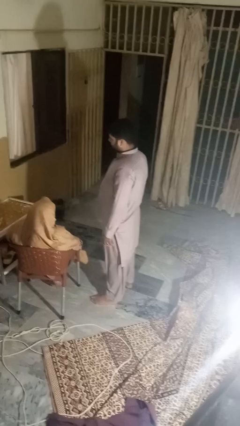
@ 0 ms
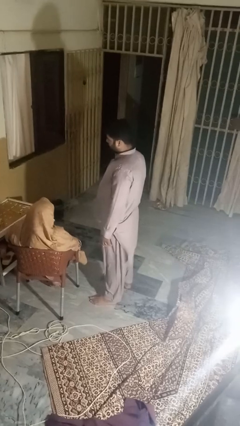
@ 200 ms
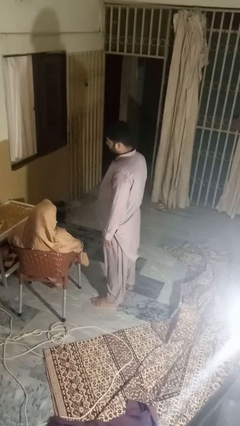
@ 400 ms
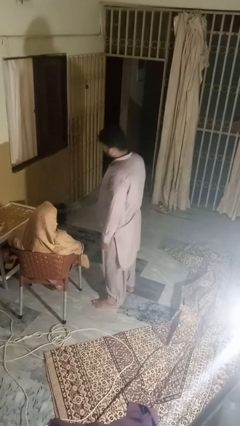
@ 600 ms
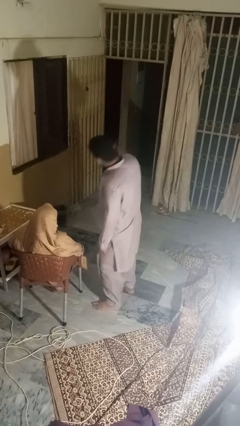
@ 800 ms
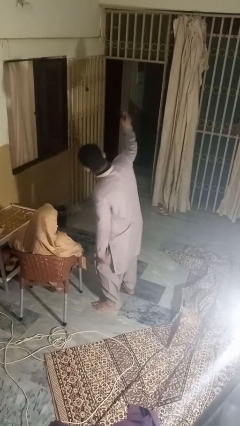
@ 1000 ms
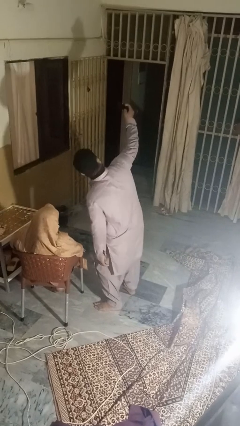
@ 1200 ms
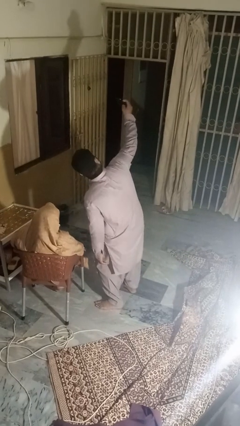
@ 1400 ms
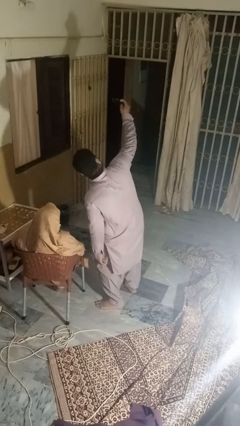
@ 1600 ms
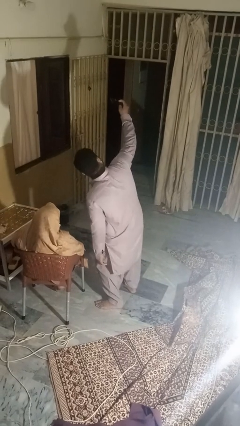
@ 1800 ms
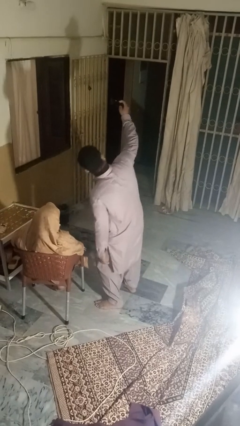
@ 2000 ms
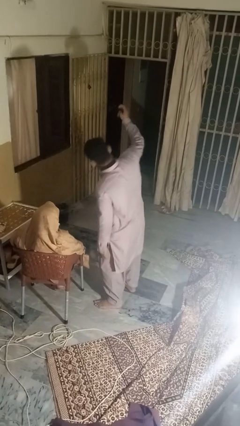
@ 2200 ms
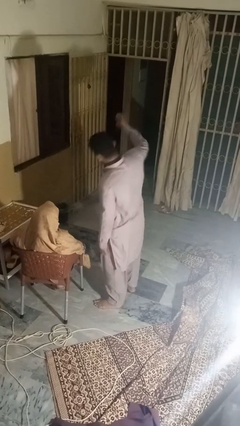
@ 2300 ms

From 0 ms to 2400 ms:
person takes selfie with person

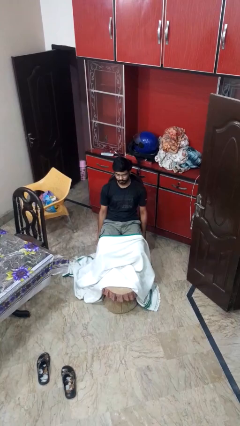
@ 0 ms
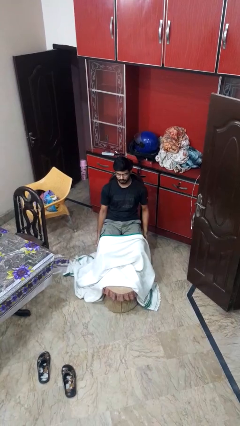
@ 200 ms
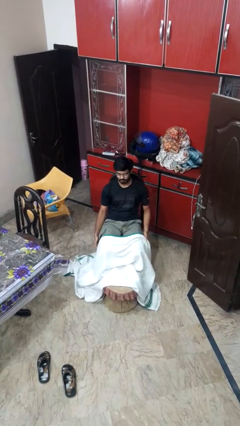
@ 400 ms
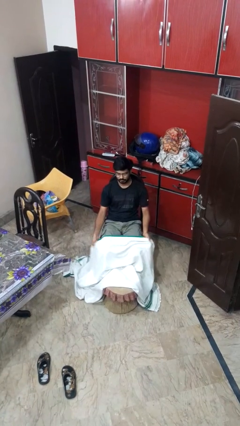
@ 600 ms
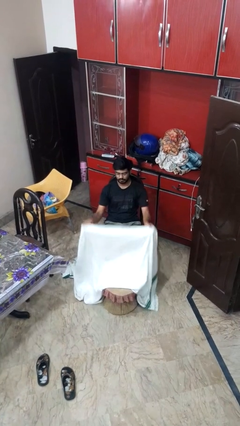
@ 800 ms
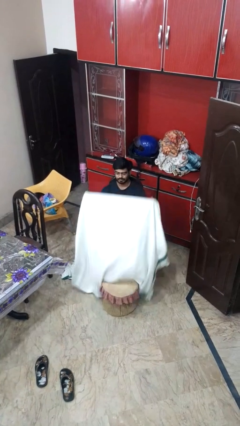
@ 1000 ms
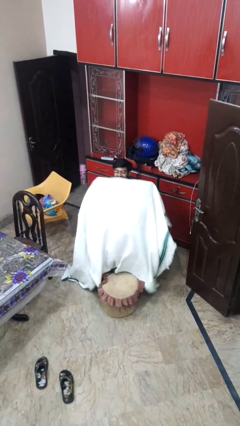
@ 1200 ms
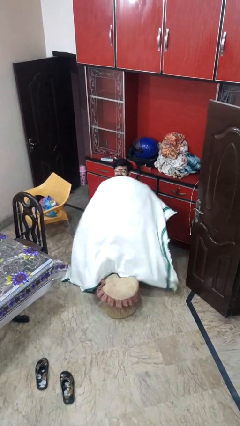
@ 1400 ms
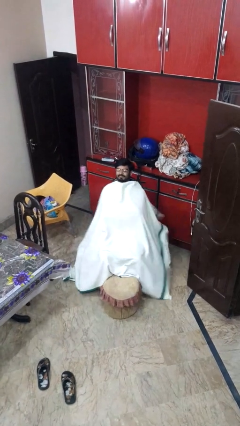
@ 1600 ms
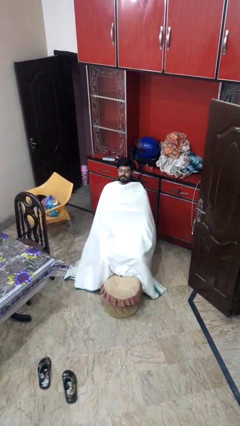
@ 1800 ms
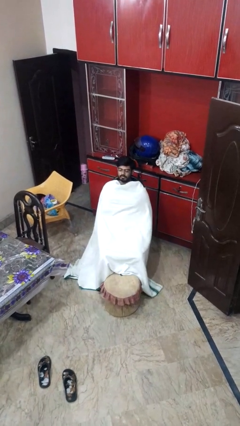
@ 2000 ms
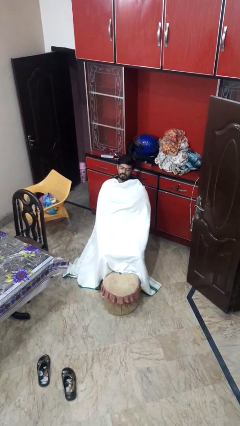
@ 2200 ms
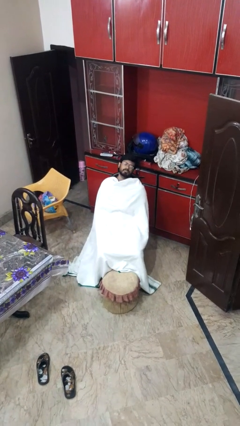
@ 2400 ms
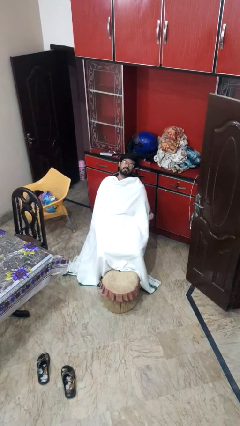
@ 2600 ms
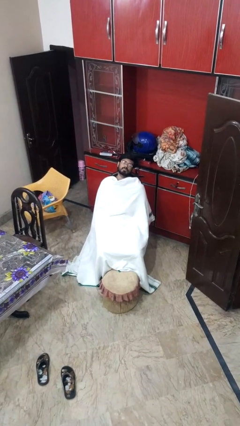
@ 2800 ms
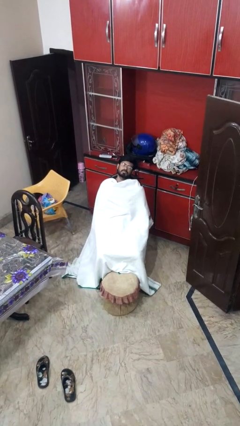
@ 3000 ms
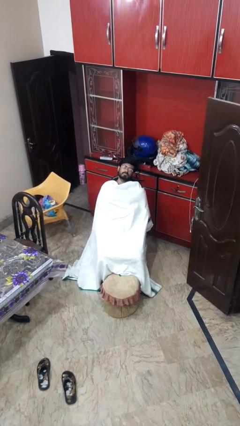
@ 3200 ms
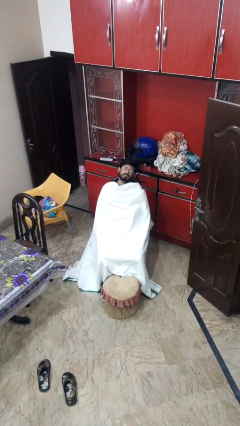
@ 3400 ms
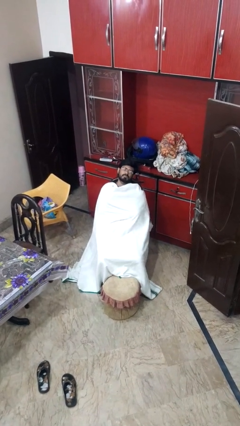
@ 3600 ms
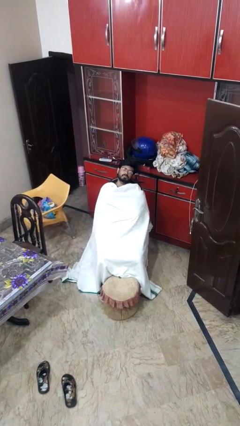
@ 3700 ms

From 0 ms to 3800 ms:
person covers with blanket

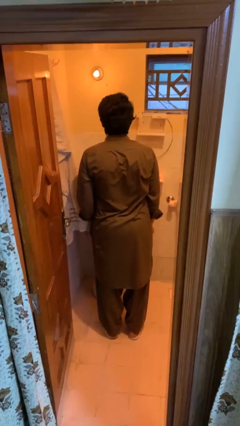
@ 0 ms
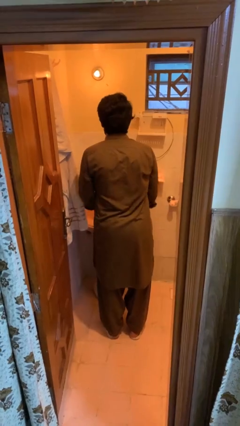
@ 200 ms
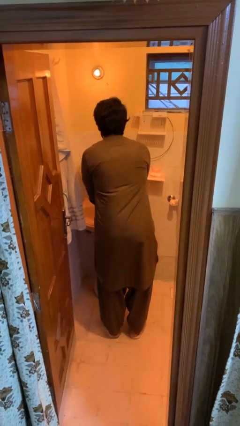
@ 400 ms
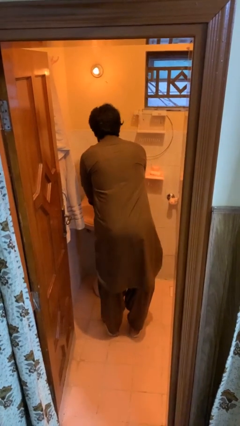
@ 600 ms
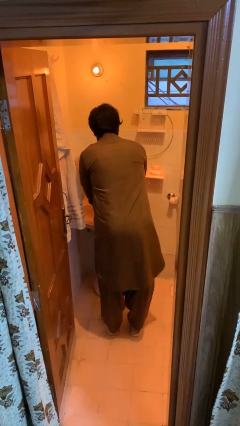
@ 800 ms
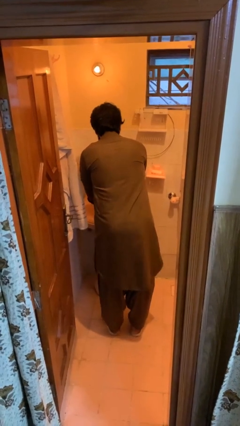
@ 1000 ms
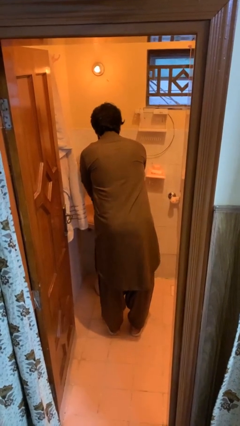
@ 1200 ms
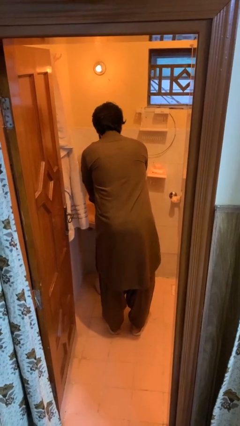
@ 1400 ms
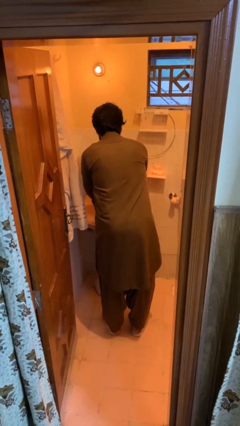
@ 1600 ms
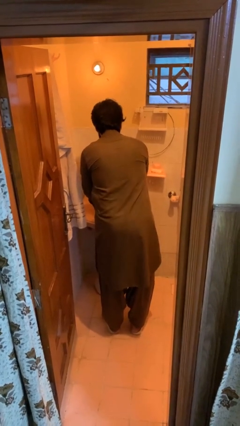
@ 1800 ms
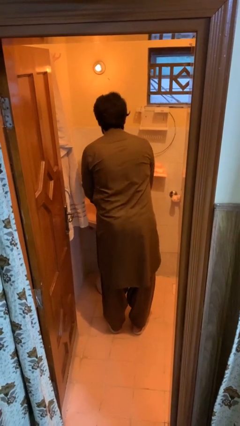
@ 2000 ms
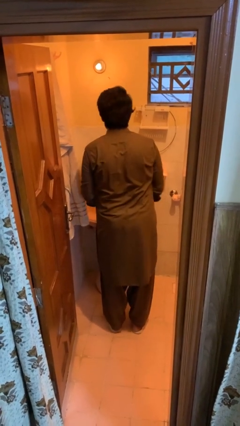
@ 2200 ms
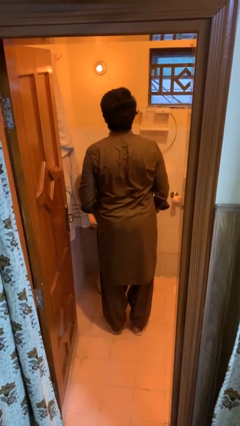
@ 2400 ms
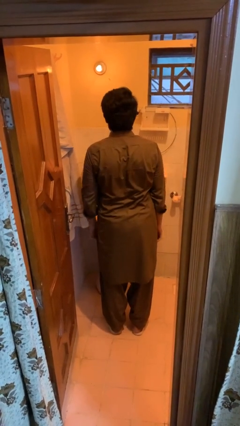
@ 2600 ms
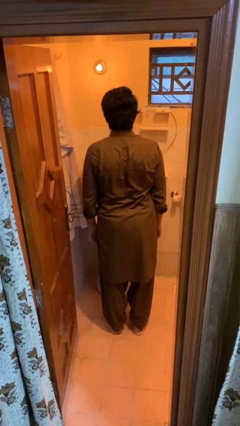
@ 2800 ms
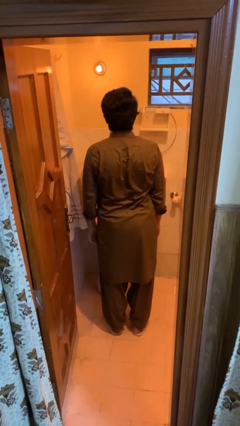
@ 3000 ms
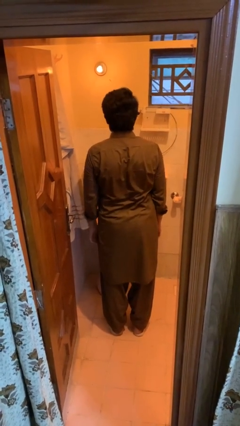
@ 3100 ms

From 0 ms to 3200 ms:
person washes hands

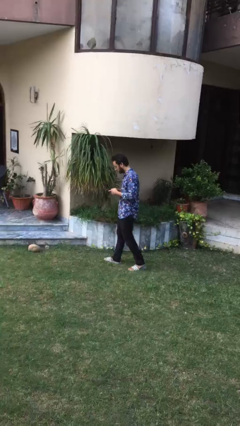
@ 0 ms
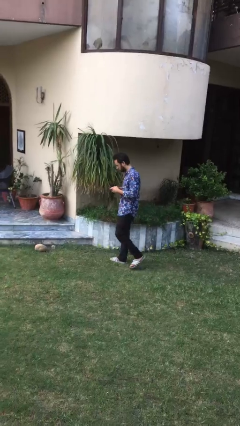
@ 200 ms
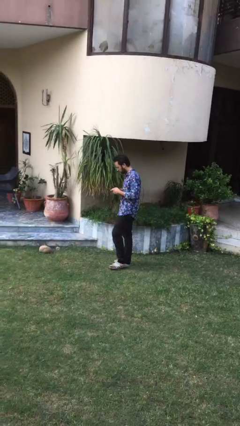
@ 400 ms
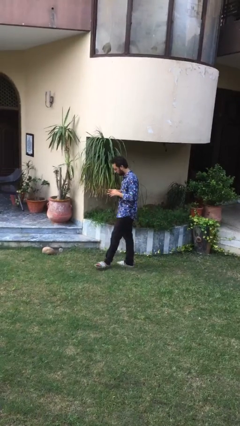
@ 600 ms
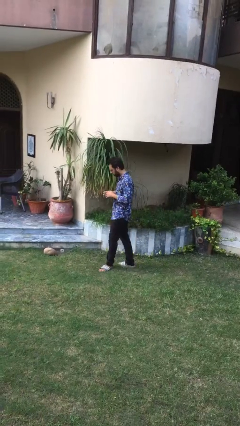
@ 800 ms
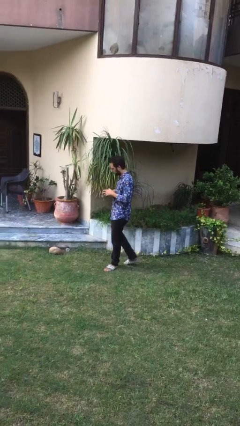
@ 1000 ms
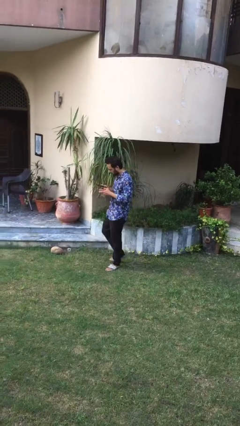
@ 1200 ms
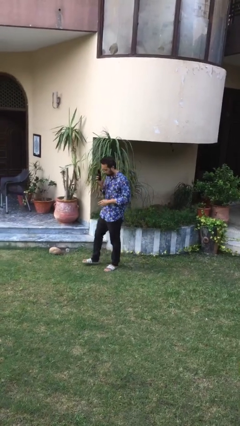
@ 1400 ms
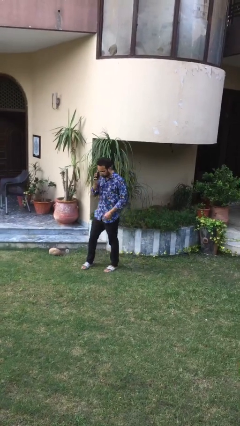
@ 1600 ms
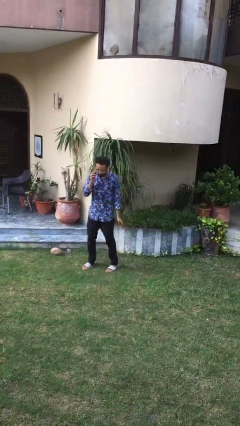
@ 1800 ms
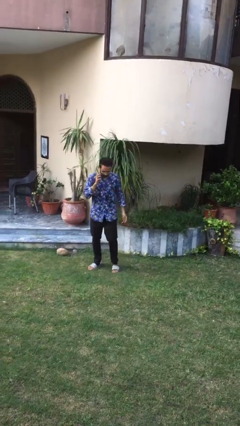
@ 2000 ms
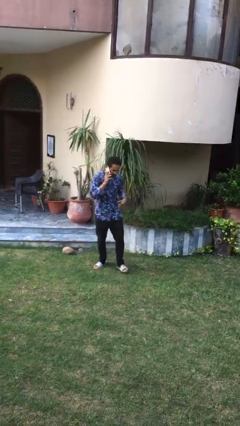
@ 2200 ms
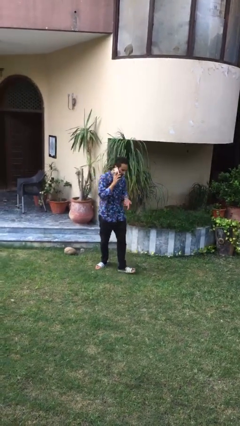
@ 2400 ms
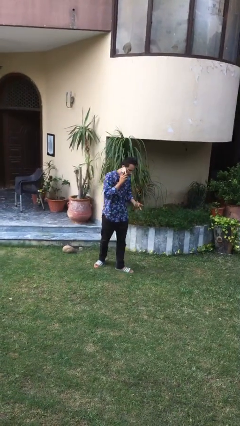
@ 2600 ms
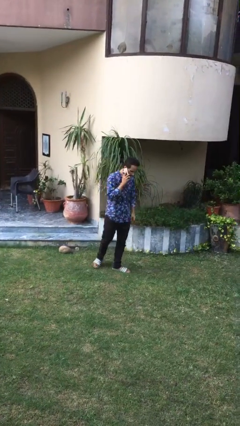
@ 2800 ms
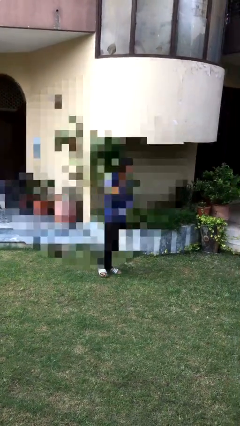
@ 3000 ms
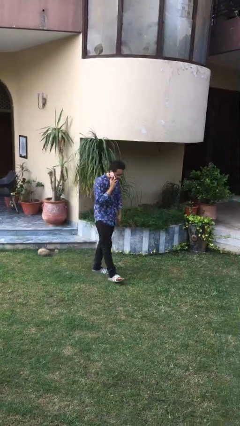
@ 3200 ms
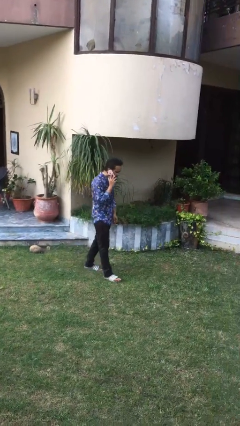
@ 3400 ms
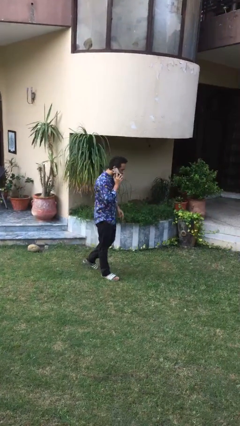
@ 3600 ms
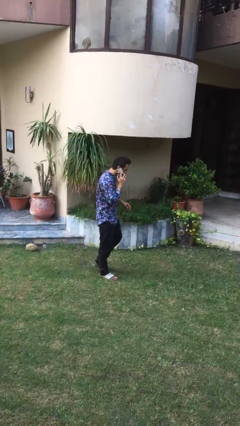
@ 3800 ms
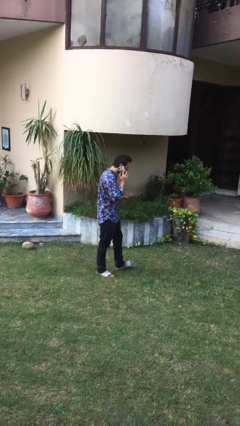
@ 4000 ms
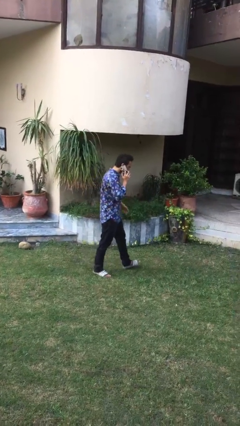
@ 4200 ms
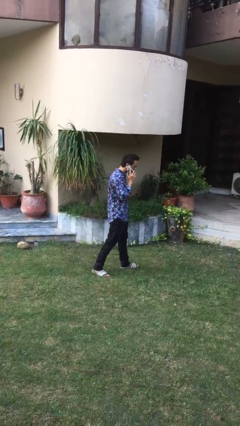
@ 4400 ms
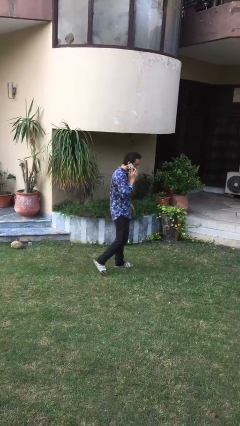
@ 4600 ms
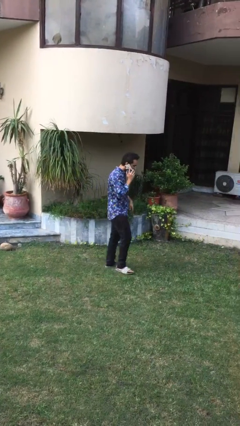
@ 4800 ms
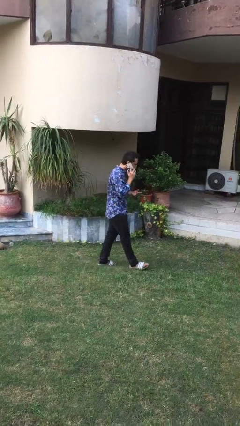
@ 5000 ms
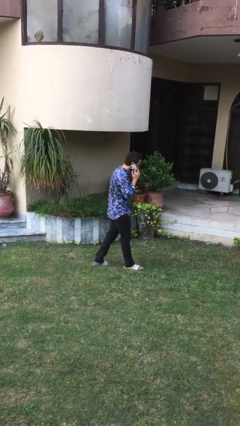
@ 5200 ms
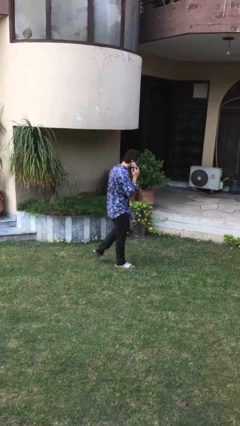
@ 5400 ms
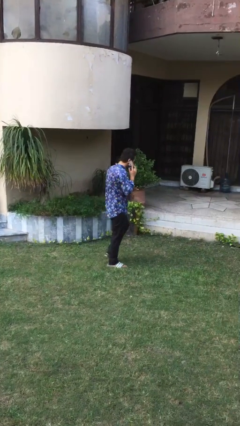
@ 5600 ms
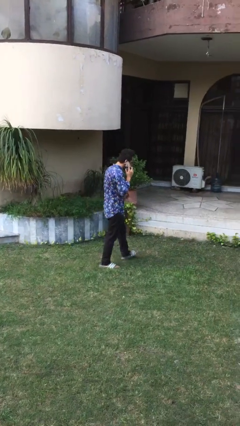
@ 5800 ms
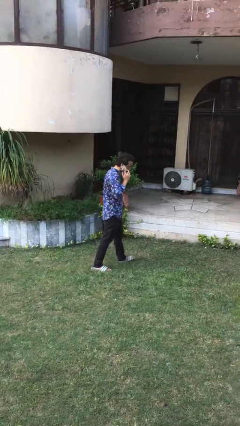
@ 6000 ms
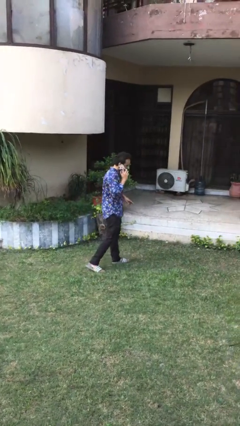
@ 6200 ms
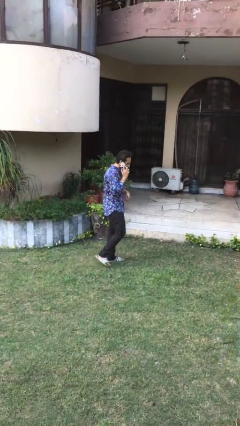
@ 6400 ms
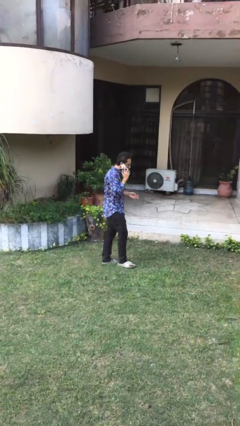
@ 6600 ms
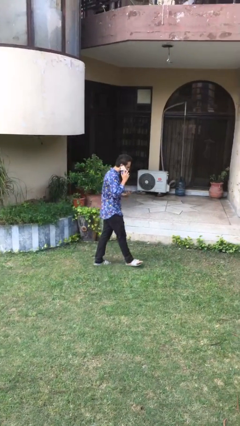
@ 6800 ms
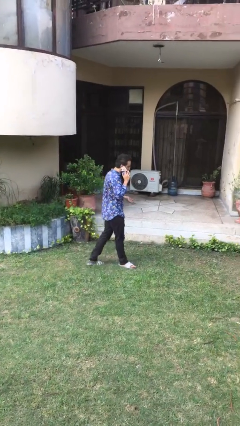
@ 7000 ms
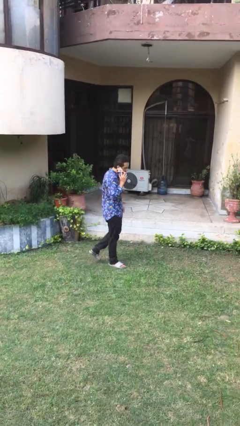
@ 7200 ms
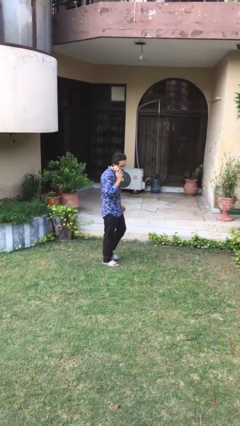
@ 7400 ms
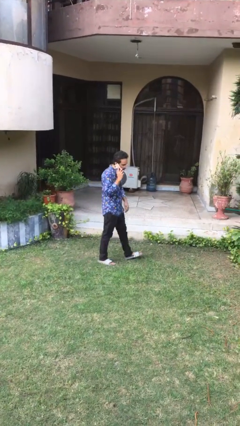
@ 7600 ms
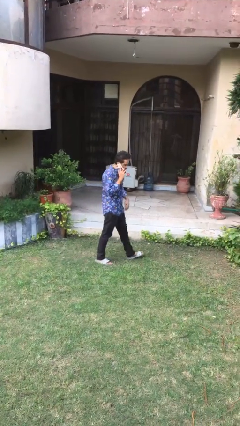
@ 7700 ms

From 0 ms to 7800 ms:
person talks on phone

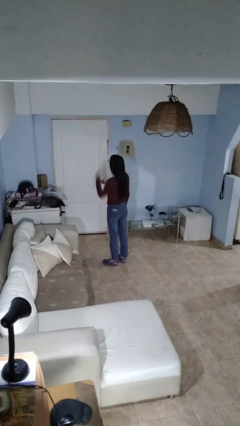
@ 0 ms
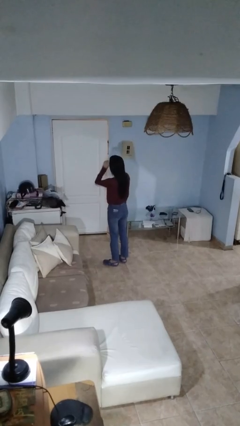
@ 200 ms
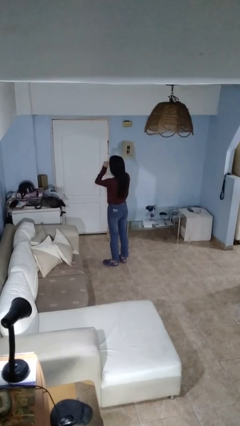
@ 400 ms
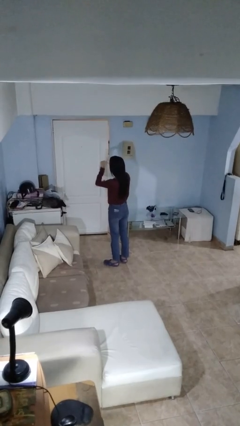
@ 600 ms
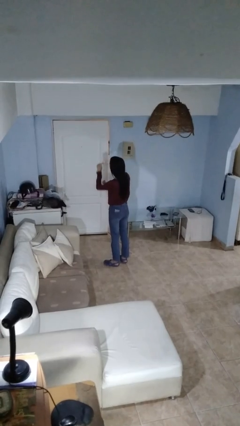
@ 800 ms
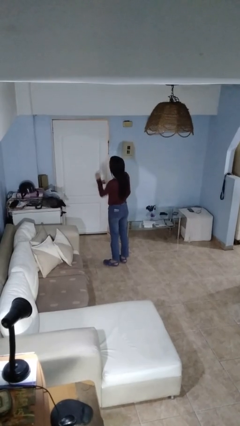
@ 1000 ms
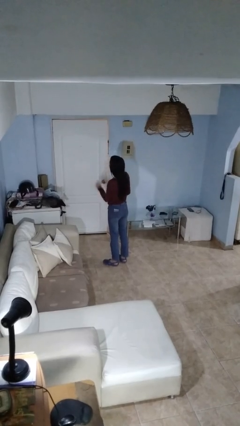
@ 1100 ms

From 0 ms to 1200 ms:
person takes off glasses
